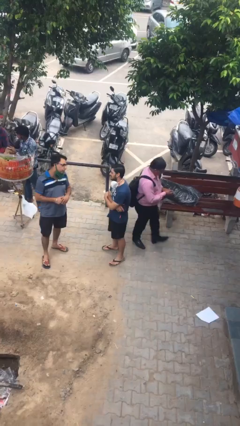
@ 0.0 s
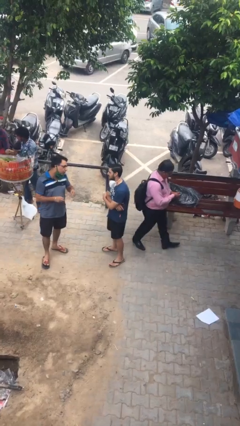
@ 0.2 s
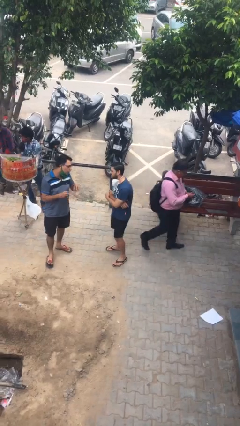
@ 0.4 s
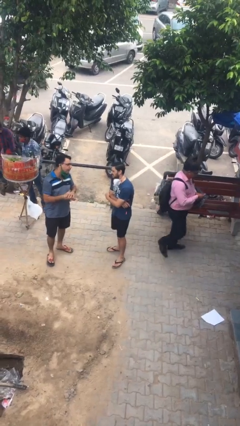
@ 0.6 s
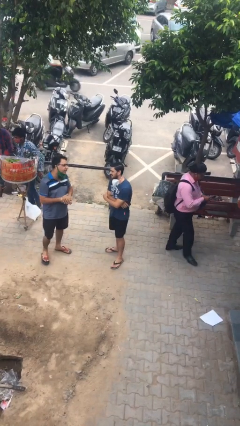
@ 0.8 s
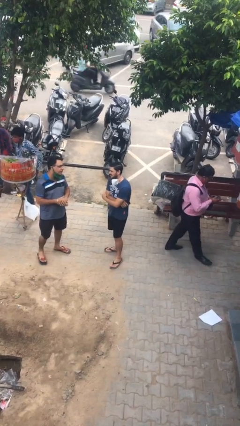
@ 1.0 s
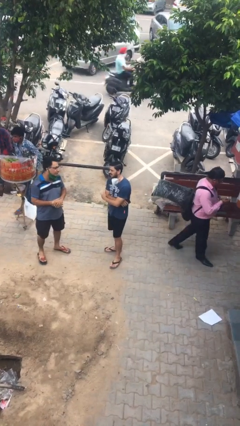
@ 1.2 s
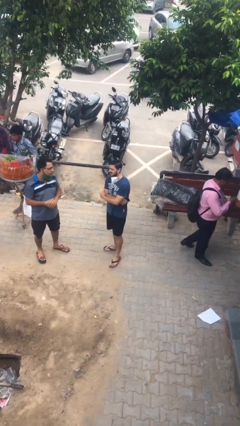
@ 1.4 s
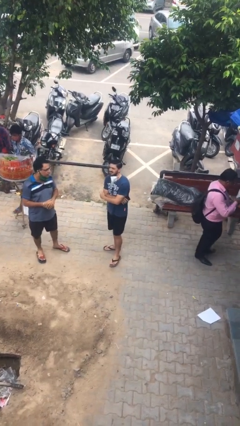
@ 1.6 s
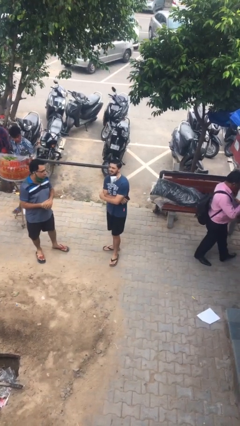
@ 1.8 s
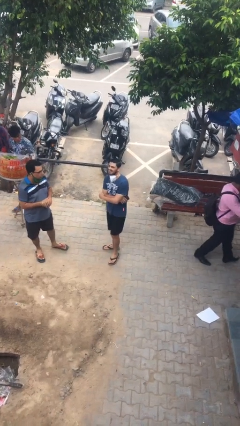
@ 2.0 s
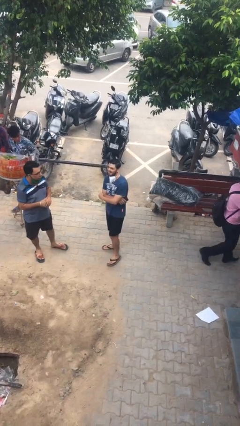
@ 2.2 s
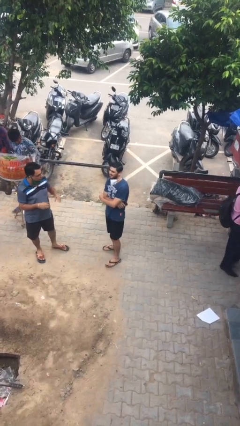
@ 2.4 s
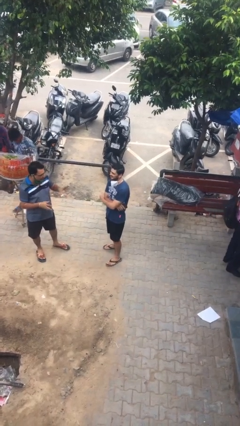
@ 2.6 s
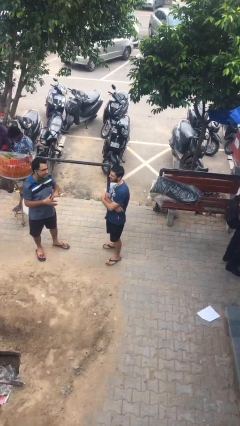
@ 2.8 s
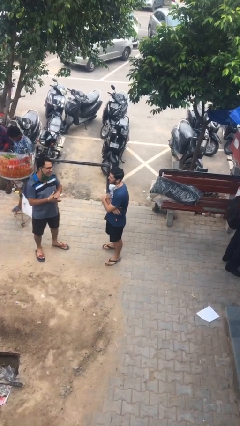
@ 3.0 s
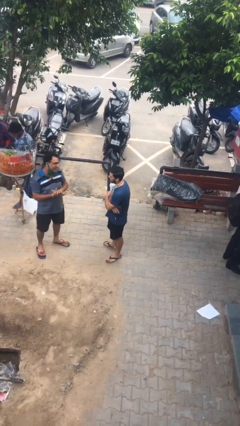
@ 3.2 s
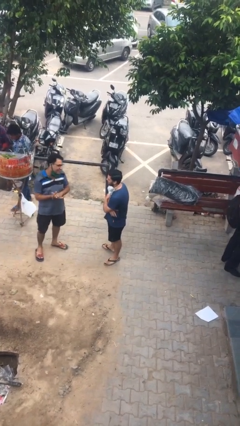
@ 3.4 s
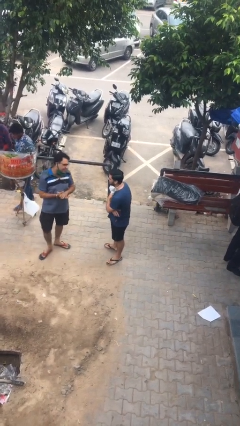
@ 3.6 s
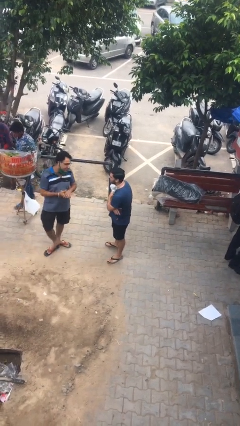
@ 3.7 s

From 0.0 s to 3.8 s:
person laughs with person

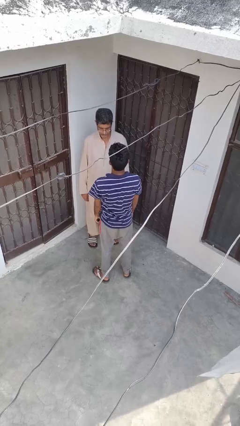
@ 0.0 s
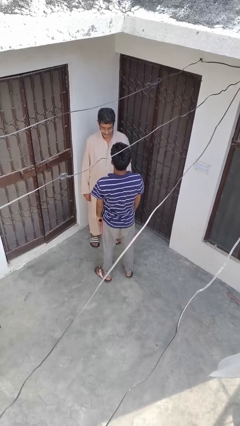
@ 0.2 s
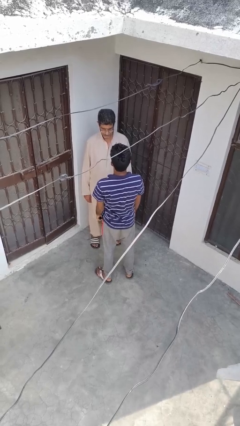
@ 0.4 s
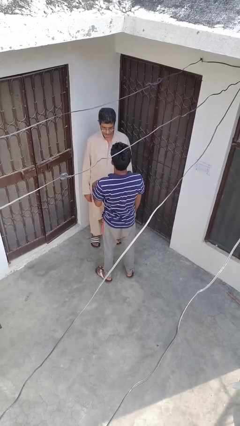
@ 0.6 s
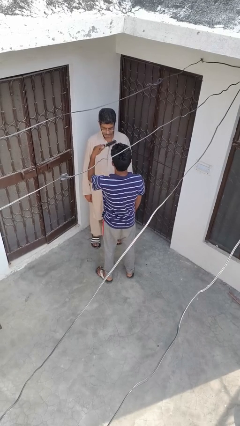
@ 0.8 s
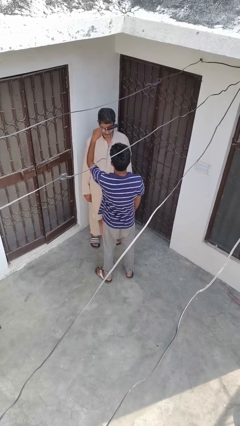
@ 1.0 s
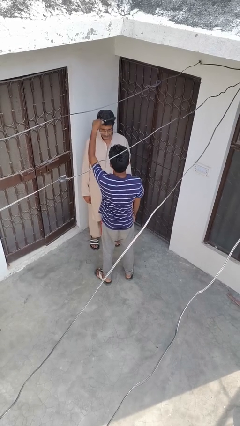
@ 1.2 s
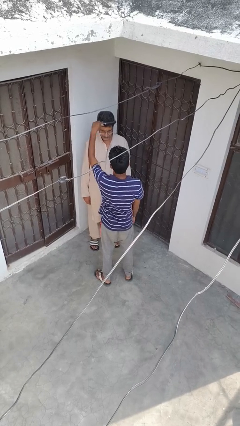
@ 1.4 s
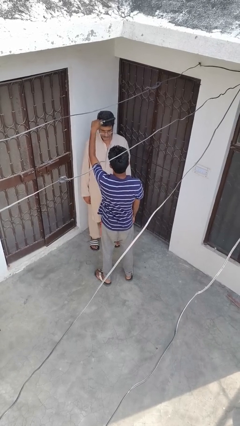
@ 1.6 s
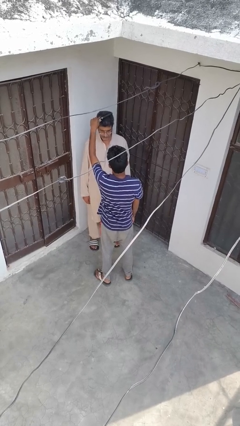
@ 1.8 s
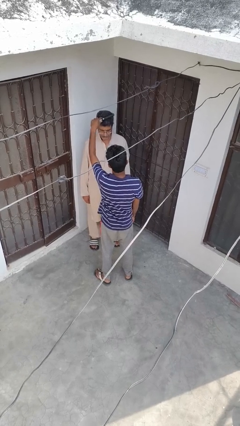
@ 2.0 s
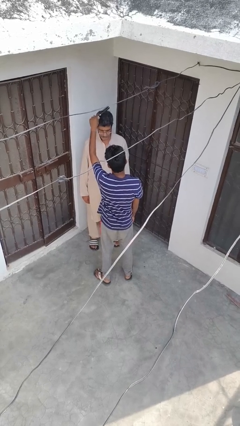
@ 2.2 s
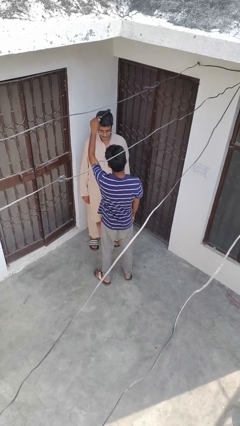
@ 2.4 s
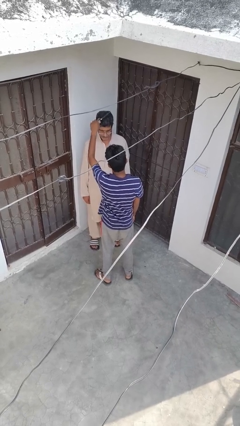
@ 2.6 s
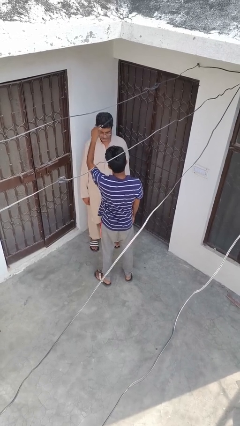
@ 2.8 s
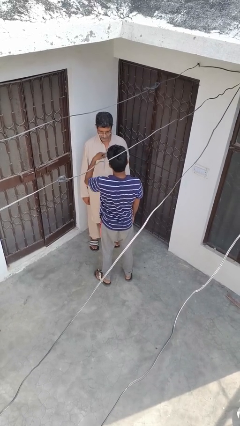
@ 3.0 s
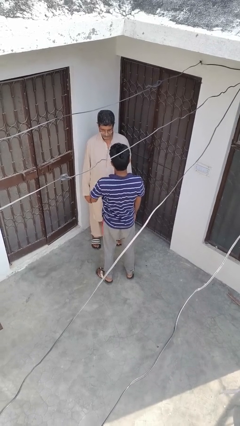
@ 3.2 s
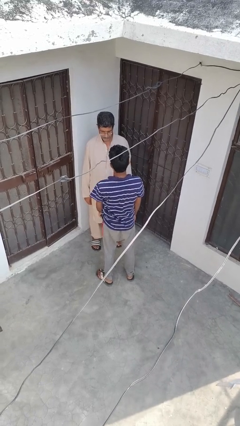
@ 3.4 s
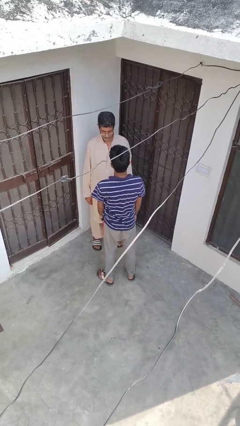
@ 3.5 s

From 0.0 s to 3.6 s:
person brushes hair of person

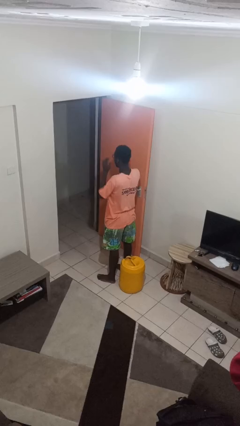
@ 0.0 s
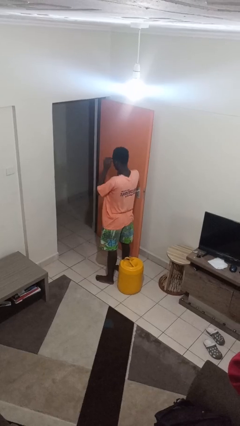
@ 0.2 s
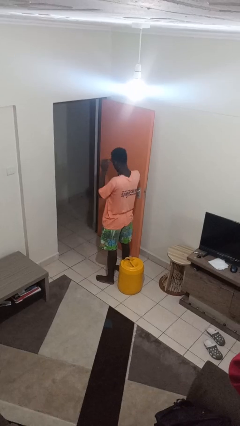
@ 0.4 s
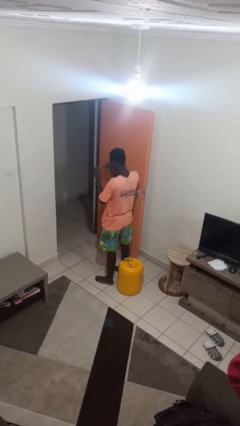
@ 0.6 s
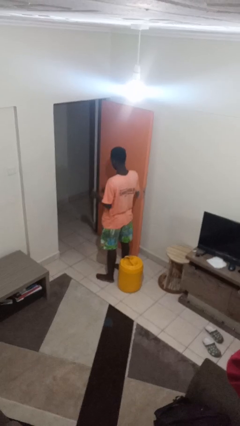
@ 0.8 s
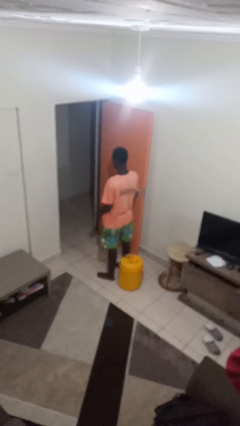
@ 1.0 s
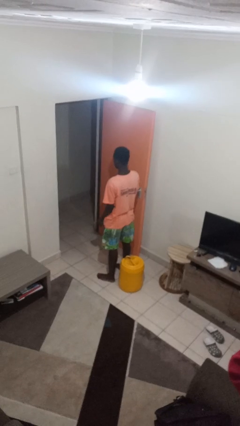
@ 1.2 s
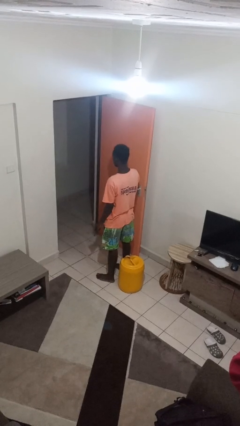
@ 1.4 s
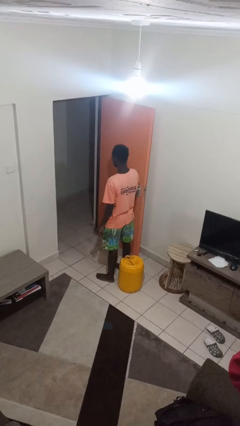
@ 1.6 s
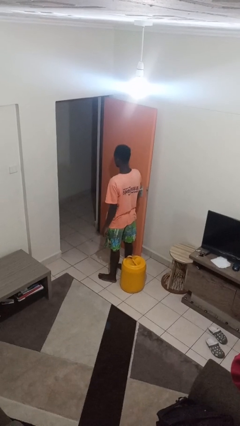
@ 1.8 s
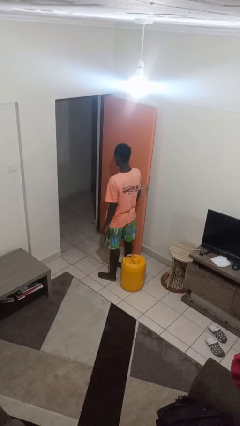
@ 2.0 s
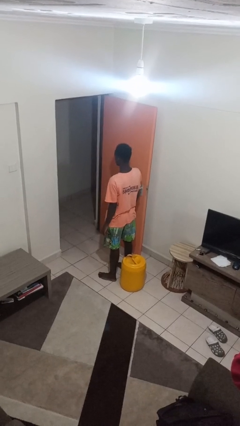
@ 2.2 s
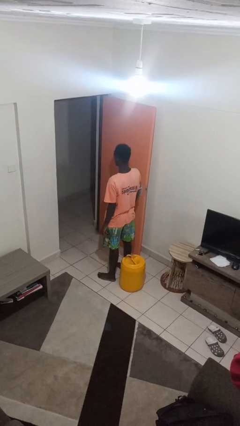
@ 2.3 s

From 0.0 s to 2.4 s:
person takes off glasses

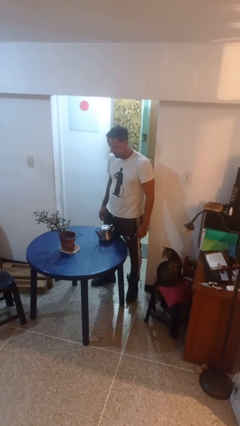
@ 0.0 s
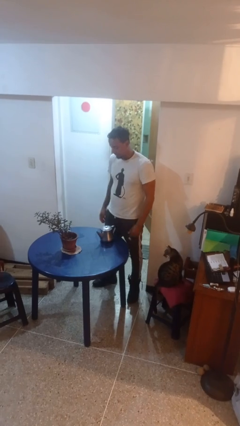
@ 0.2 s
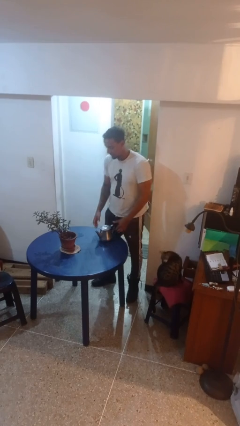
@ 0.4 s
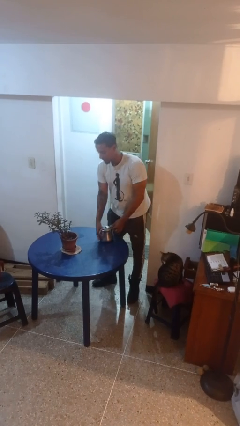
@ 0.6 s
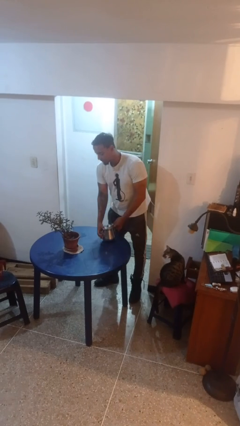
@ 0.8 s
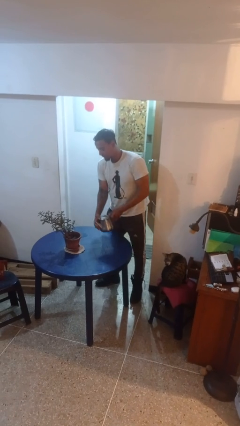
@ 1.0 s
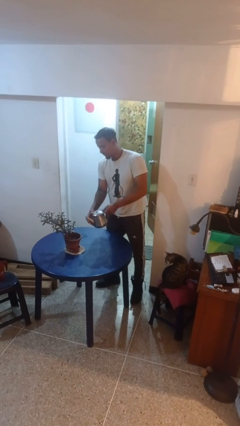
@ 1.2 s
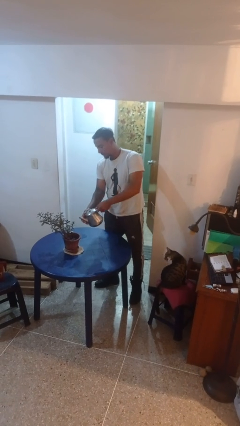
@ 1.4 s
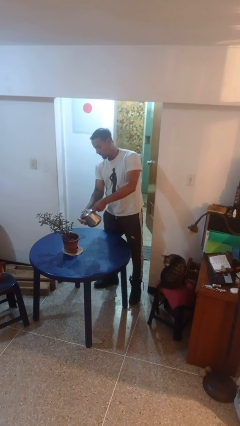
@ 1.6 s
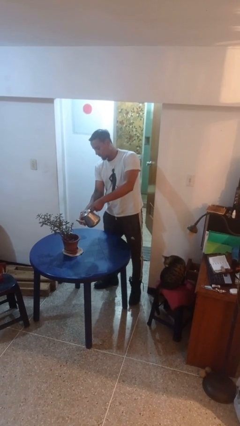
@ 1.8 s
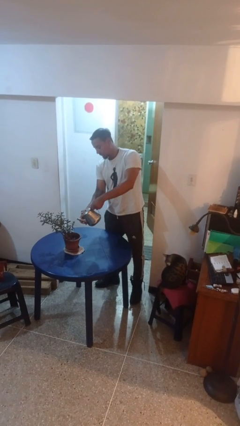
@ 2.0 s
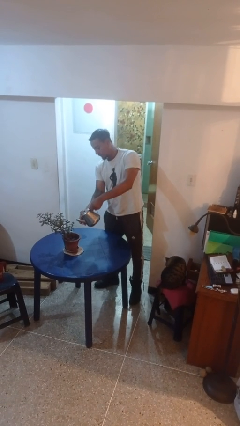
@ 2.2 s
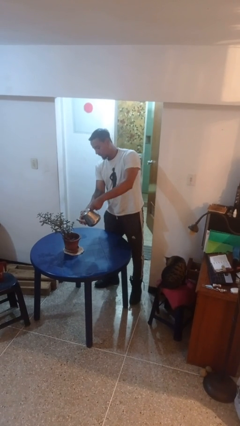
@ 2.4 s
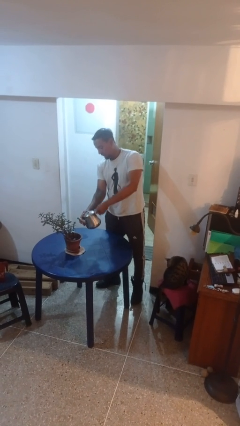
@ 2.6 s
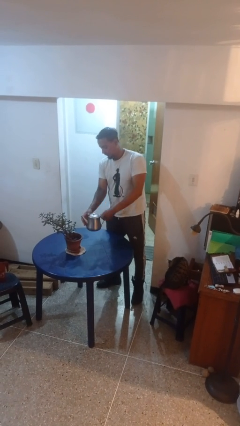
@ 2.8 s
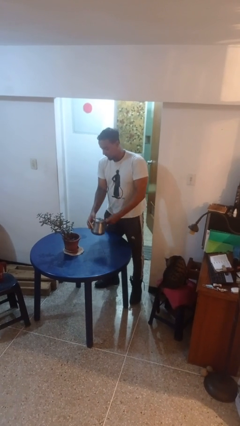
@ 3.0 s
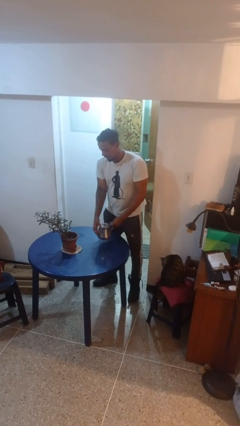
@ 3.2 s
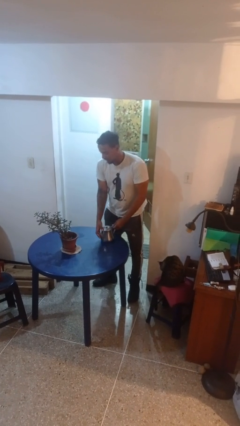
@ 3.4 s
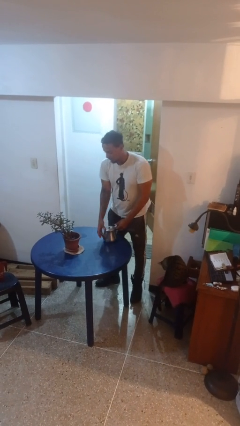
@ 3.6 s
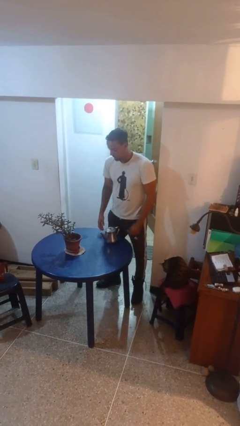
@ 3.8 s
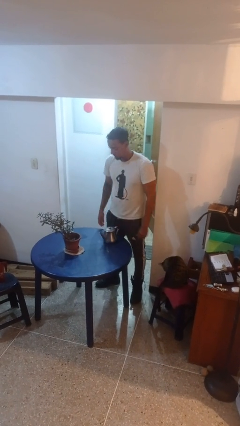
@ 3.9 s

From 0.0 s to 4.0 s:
person waters houseplant

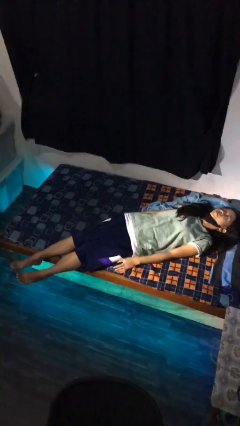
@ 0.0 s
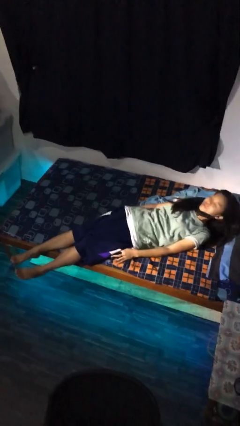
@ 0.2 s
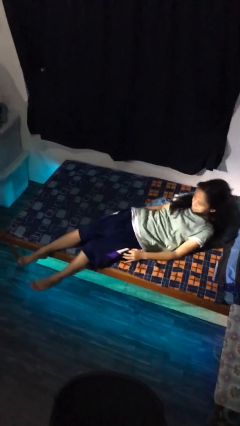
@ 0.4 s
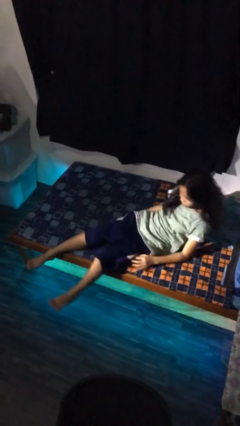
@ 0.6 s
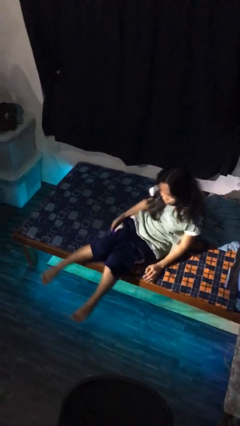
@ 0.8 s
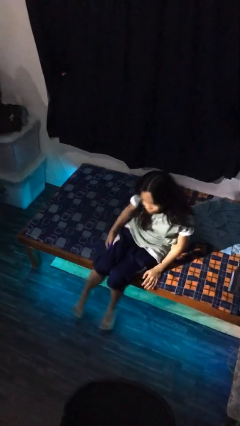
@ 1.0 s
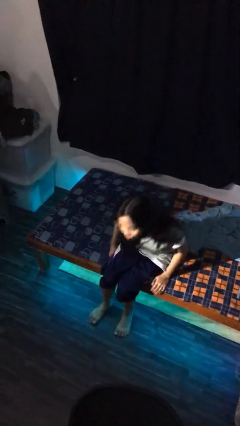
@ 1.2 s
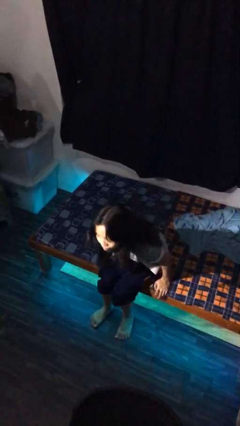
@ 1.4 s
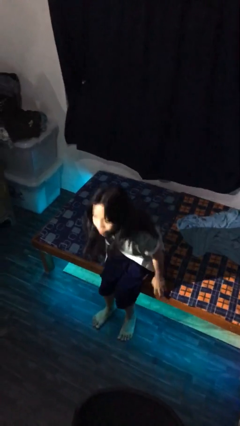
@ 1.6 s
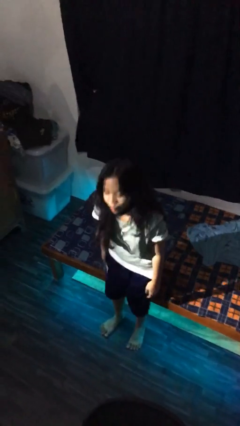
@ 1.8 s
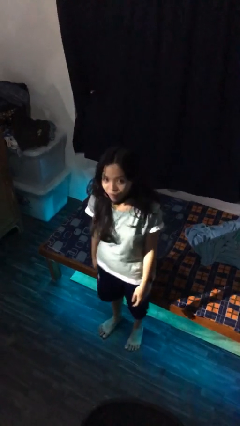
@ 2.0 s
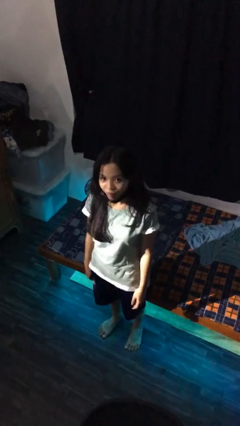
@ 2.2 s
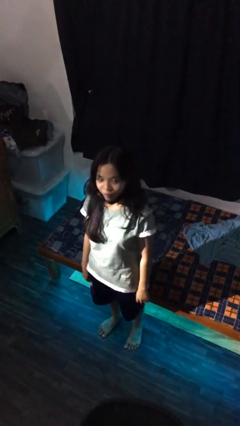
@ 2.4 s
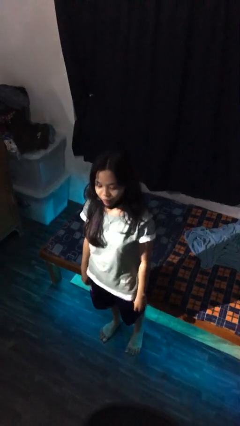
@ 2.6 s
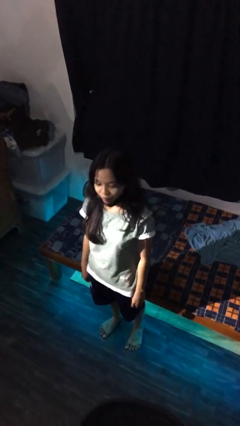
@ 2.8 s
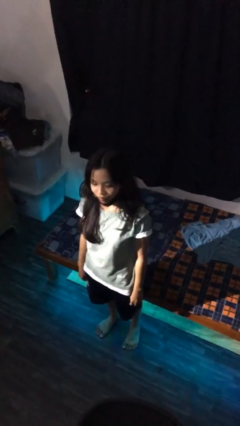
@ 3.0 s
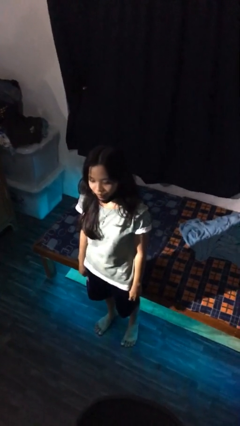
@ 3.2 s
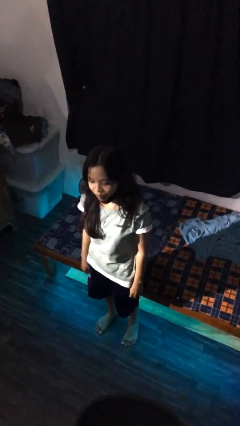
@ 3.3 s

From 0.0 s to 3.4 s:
person stands up

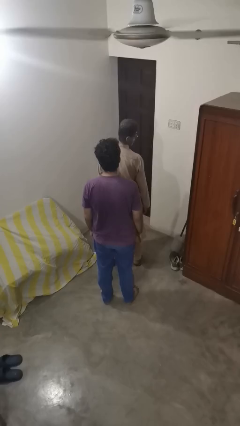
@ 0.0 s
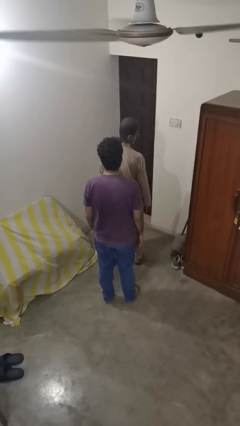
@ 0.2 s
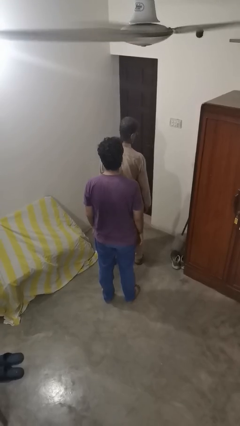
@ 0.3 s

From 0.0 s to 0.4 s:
person spins person around
